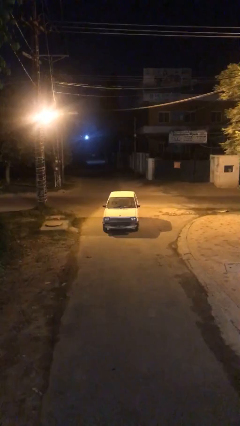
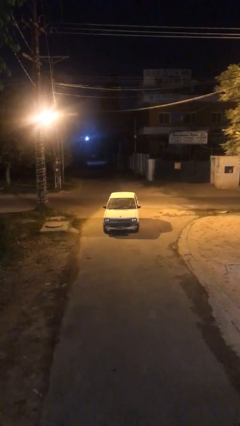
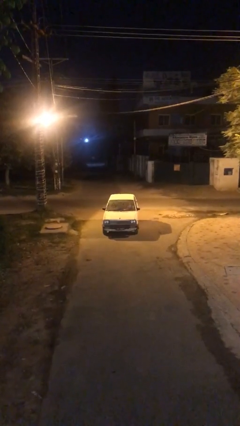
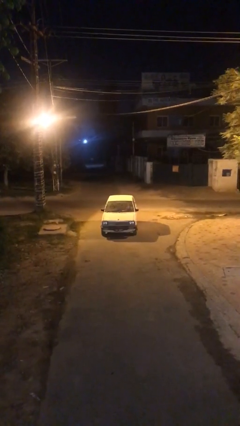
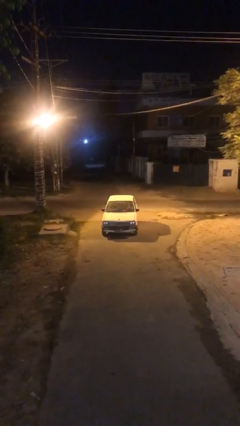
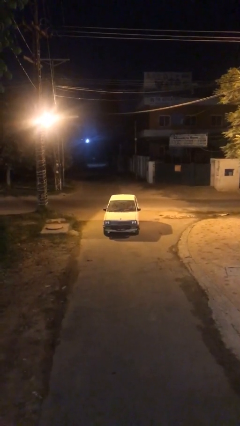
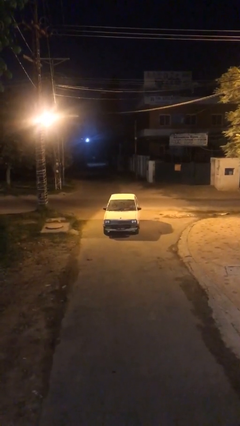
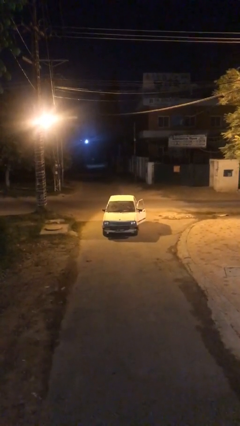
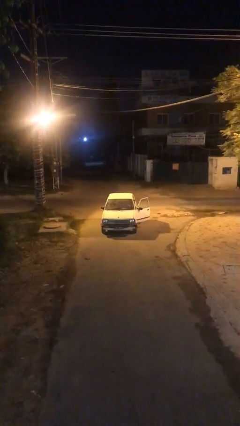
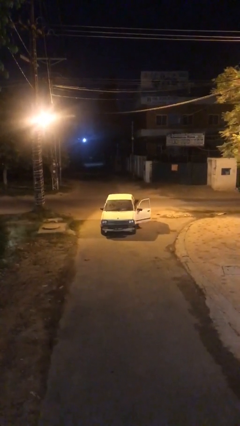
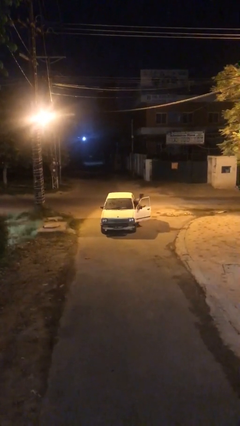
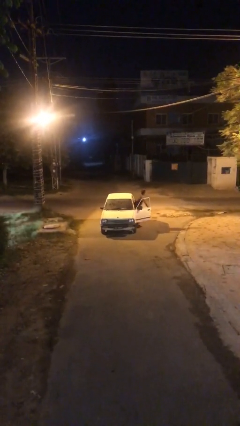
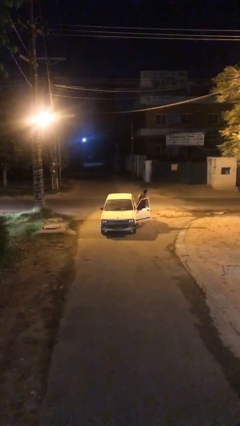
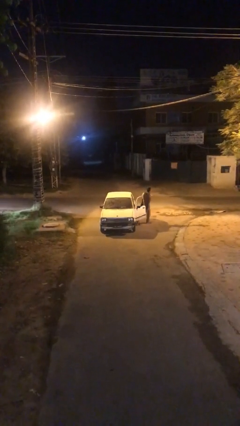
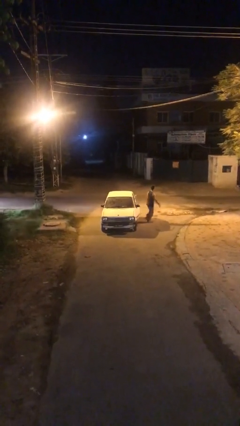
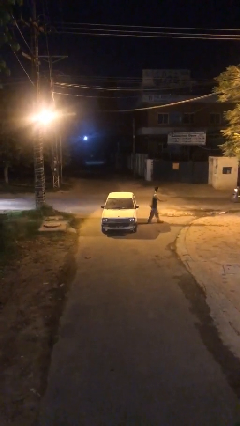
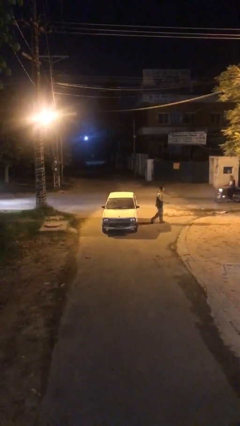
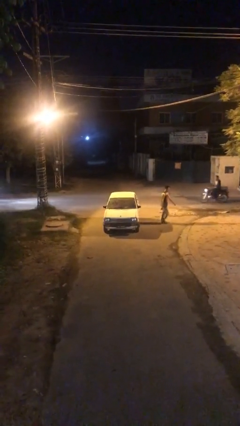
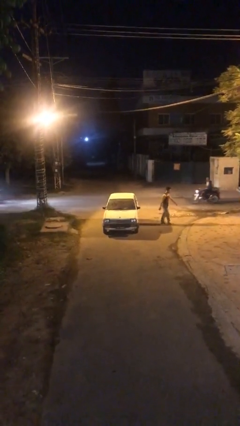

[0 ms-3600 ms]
car drops off person

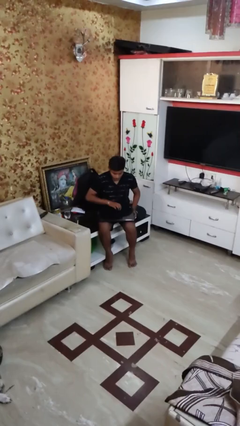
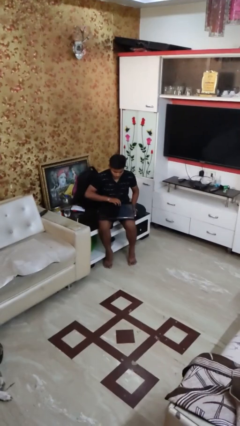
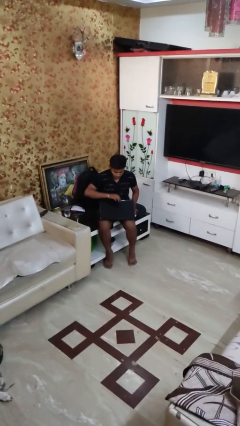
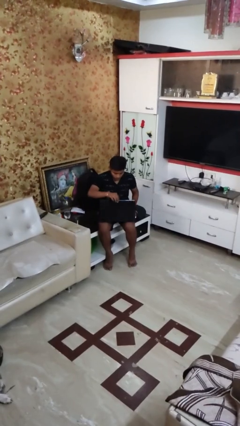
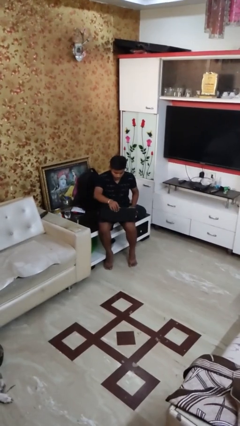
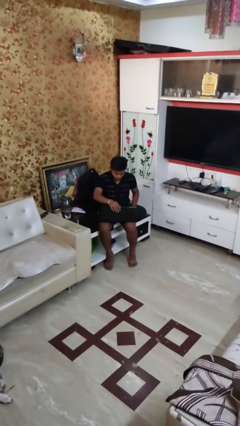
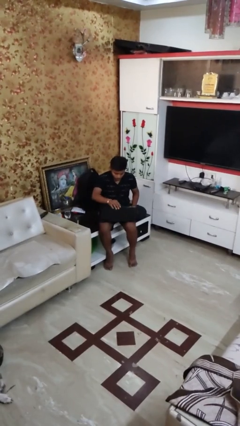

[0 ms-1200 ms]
person opens laptop

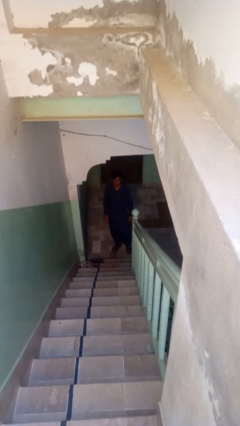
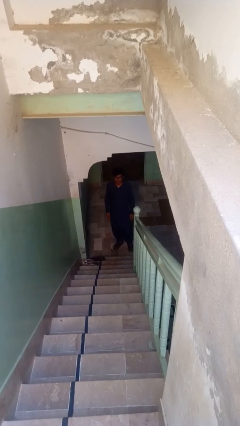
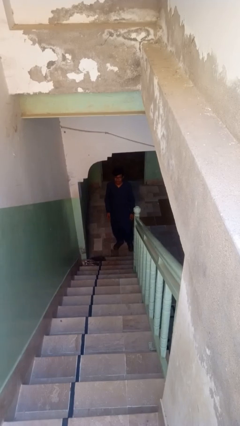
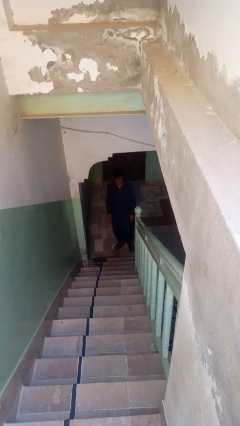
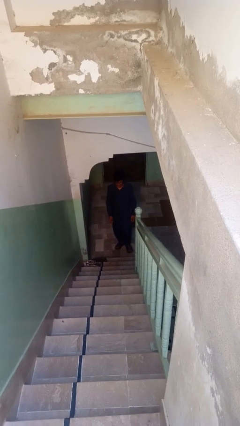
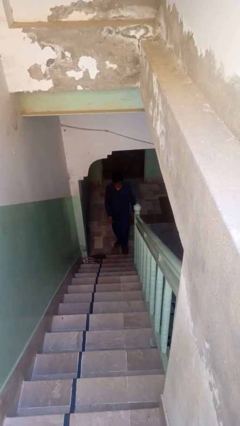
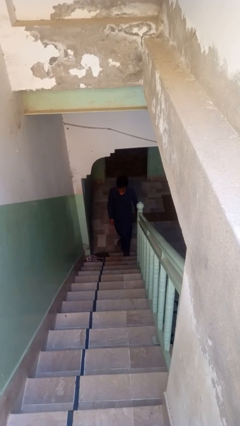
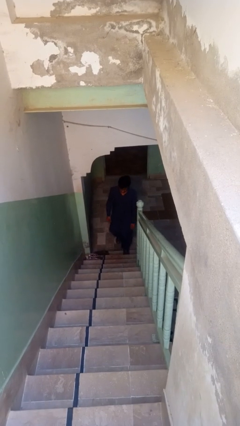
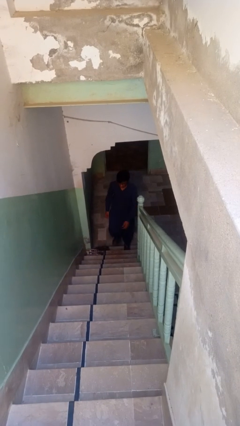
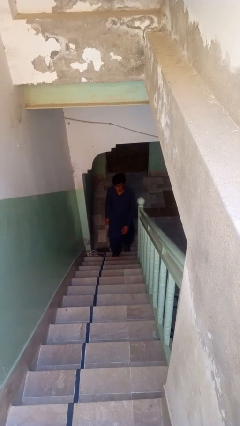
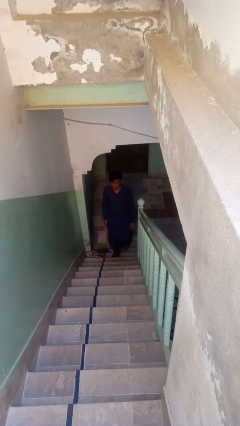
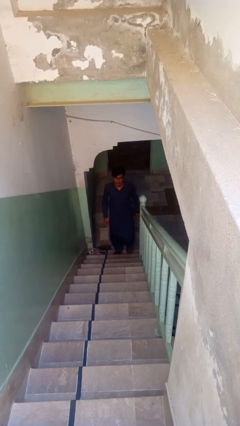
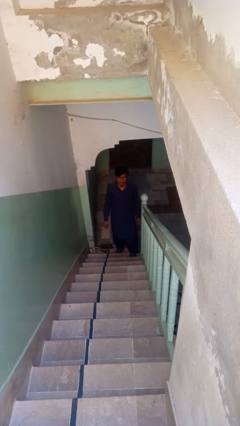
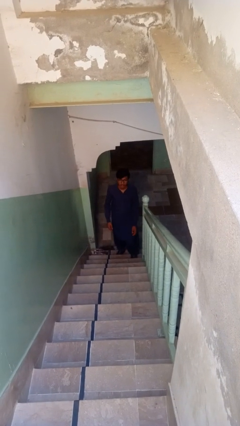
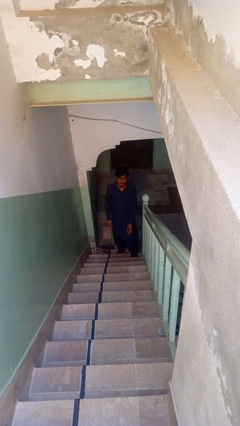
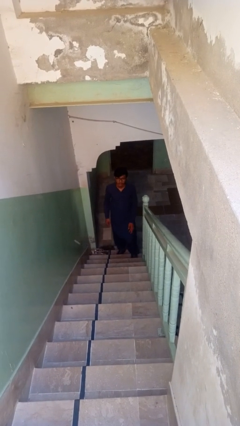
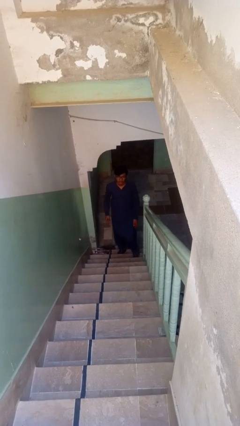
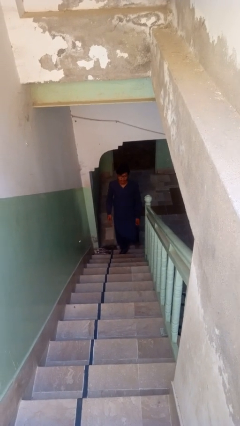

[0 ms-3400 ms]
person climbs up stairs

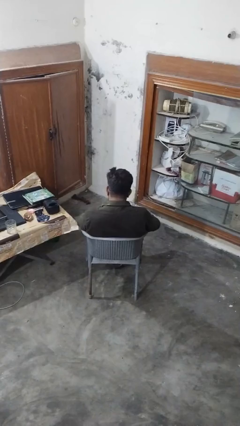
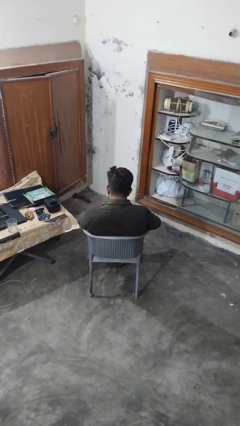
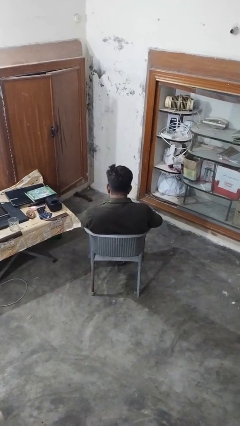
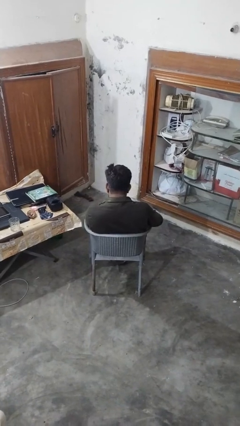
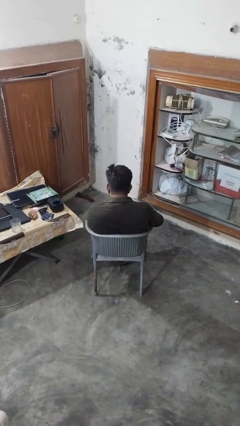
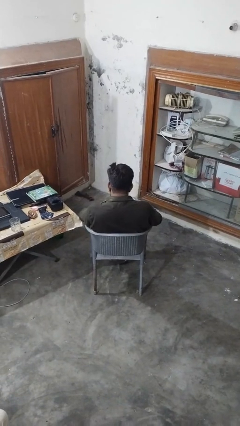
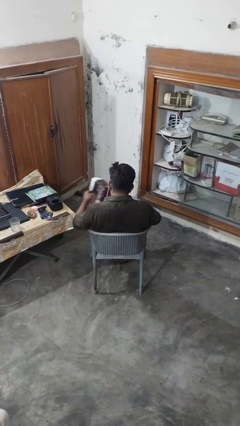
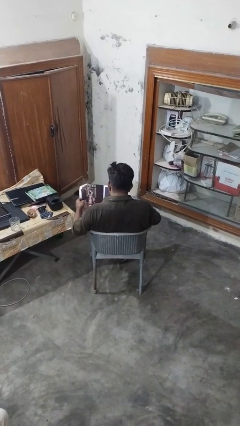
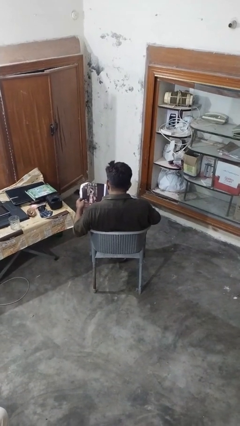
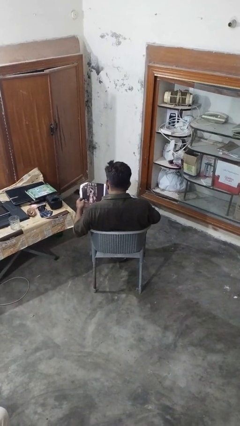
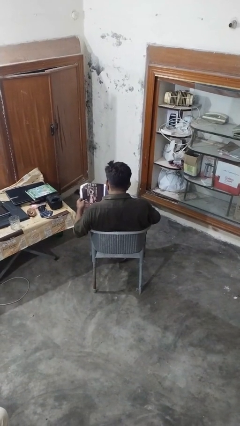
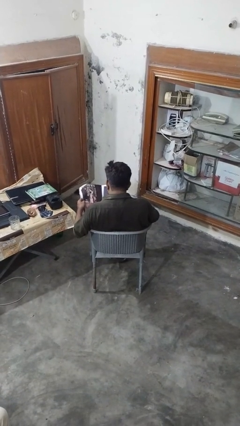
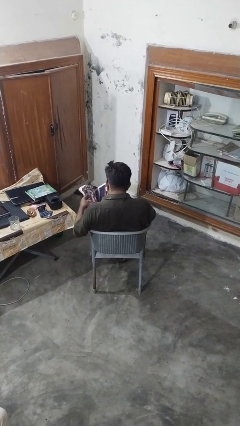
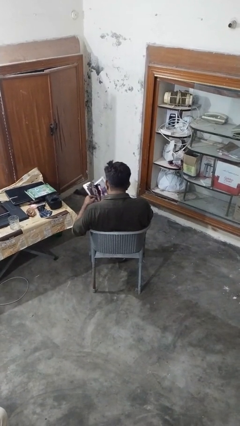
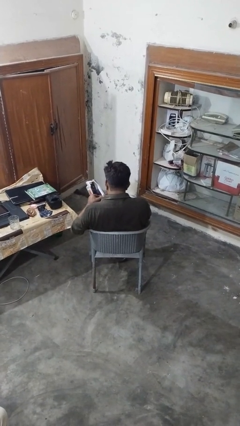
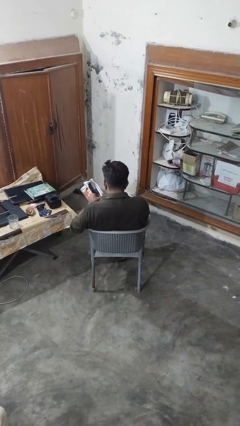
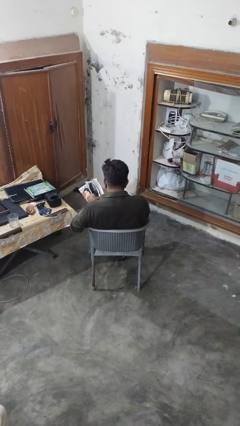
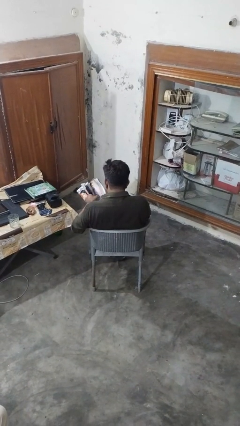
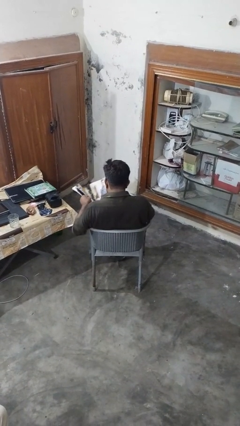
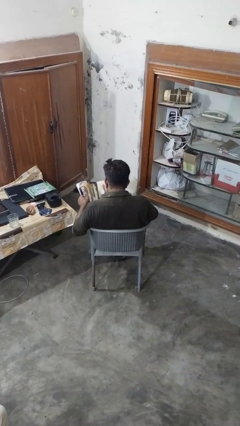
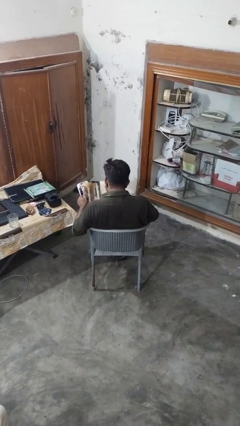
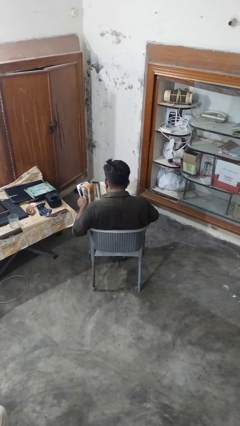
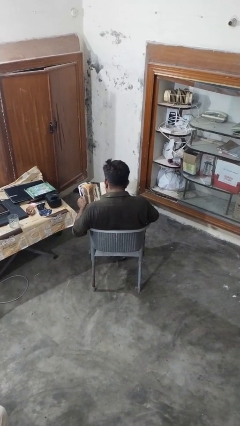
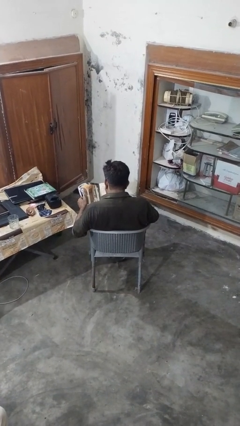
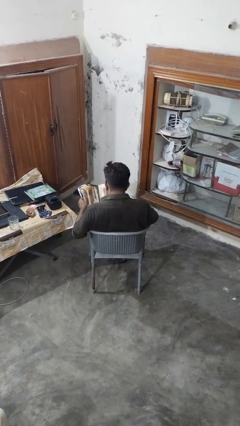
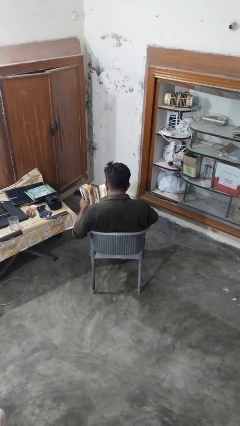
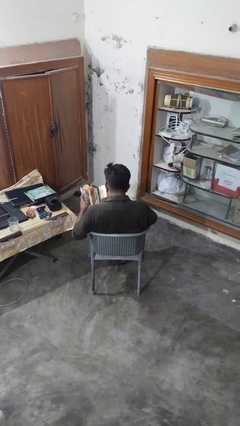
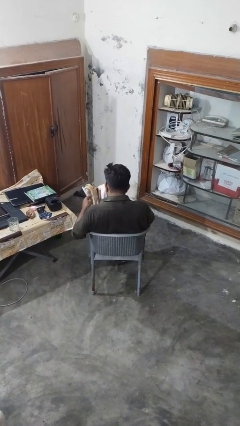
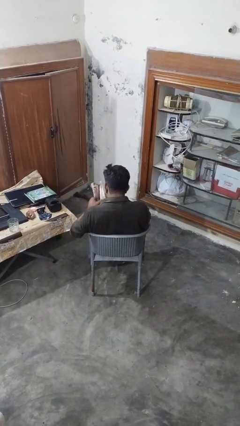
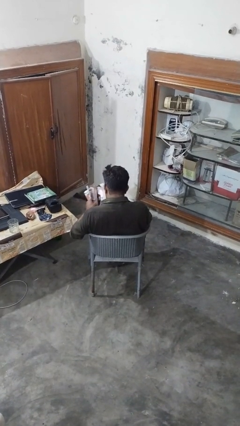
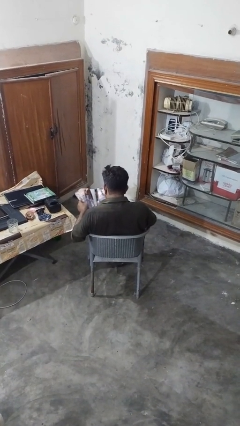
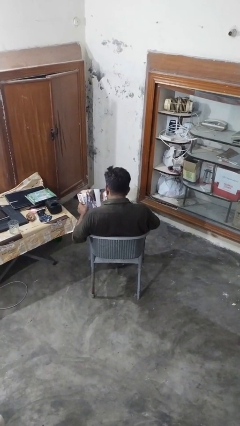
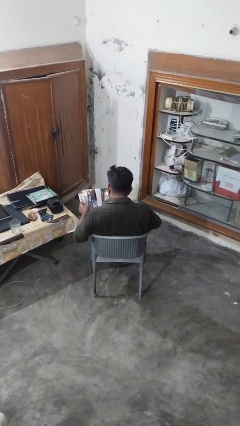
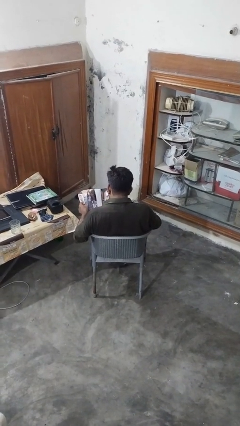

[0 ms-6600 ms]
person reads magazine

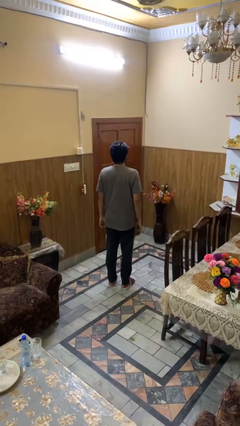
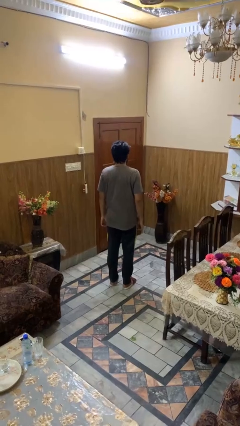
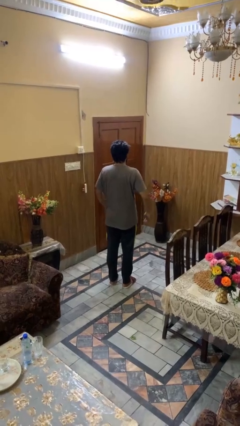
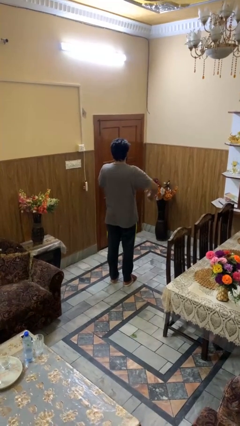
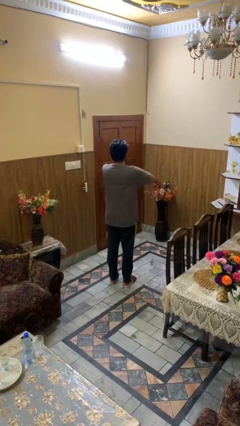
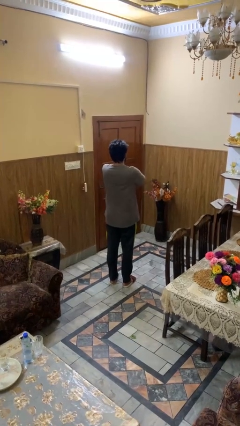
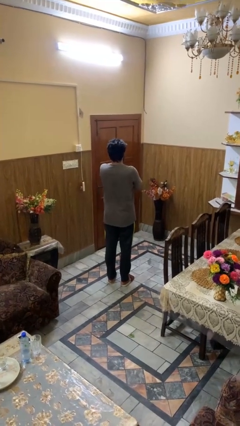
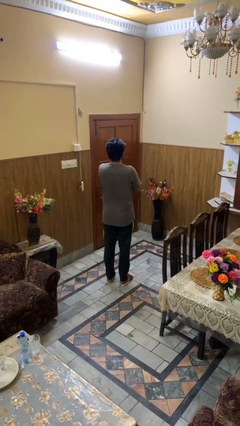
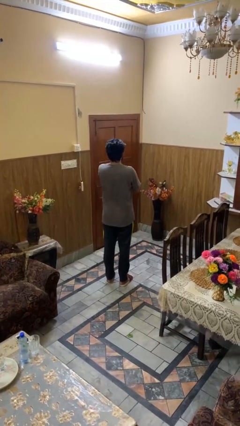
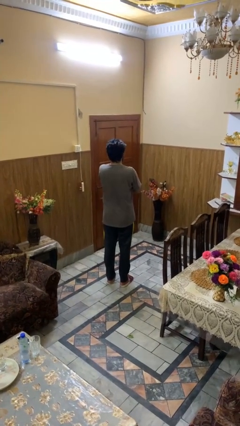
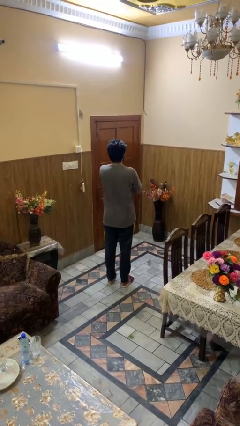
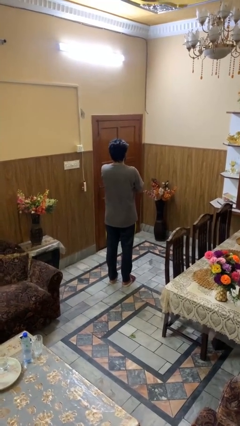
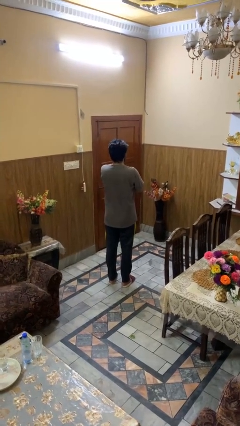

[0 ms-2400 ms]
person crosses arms
